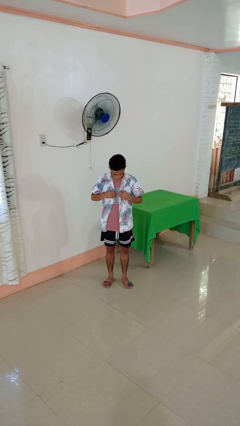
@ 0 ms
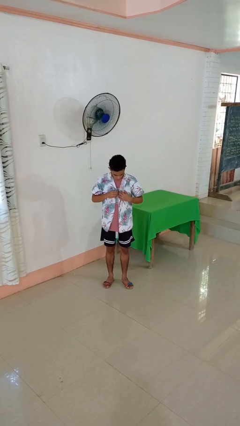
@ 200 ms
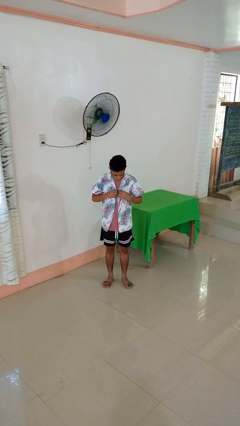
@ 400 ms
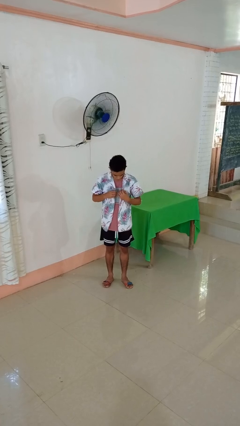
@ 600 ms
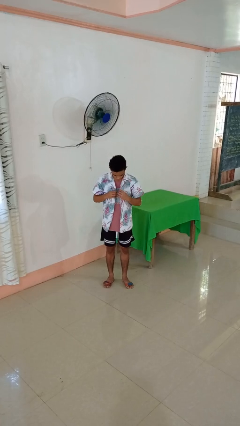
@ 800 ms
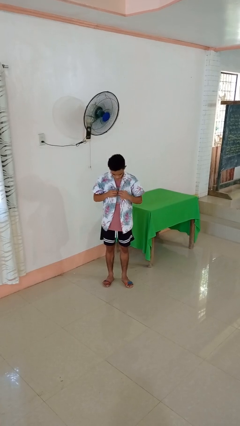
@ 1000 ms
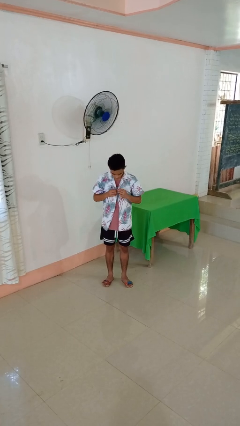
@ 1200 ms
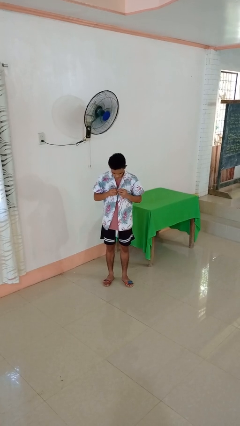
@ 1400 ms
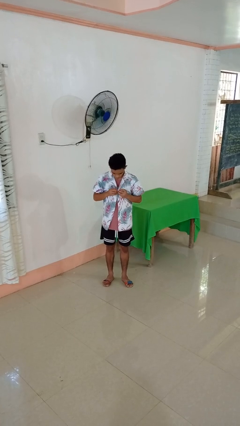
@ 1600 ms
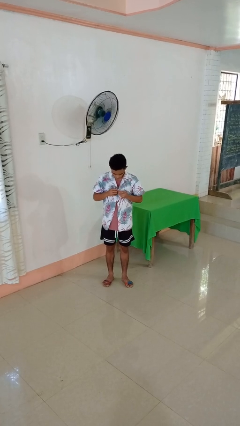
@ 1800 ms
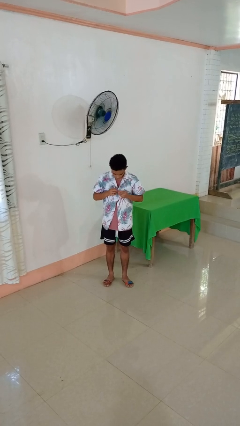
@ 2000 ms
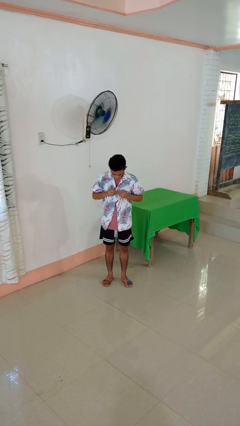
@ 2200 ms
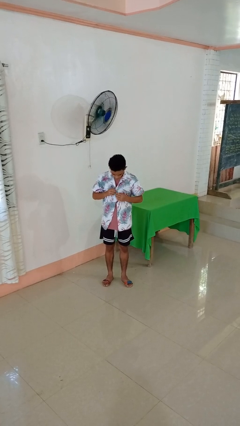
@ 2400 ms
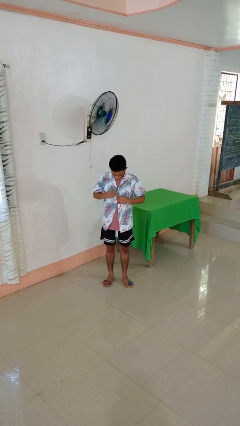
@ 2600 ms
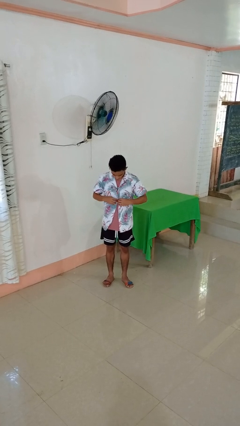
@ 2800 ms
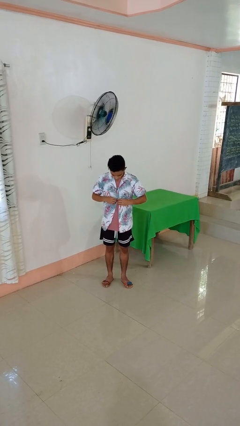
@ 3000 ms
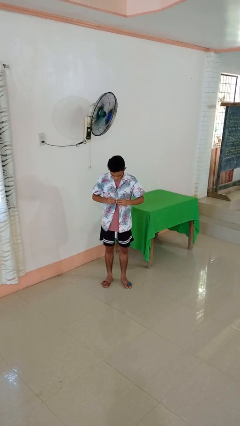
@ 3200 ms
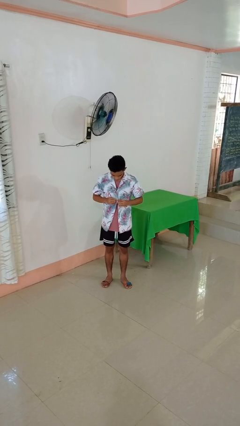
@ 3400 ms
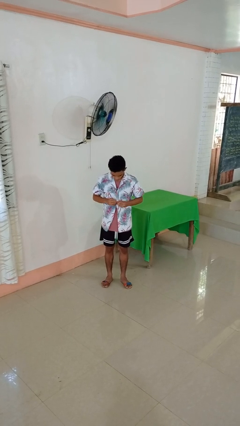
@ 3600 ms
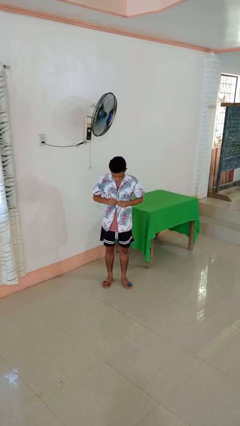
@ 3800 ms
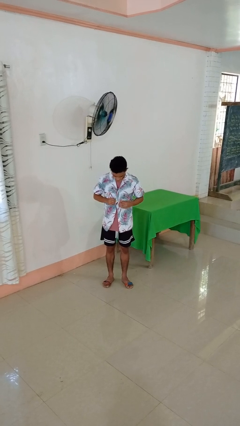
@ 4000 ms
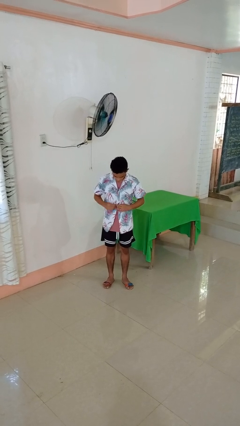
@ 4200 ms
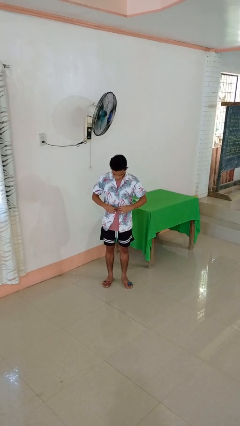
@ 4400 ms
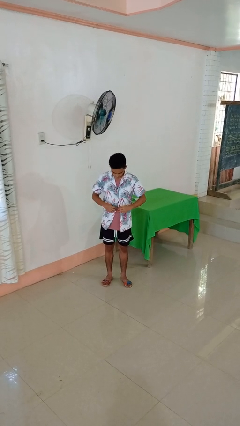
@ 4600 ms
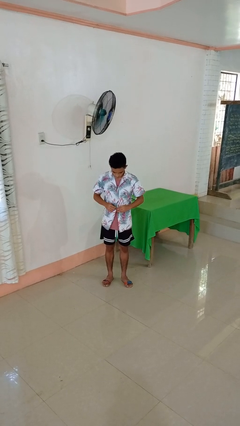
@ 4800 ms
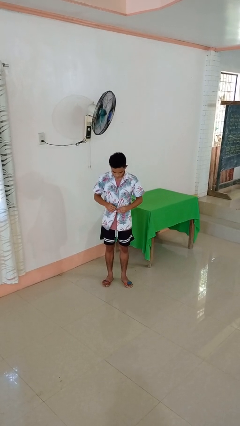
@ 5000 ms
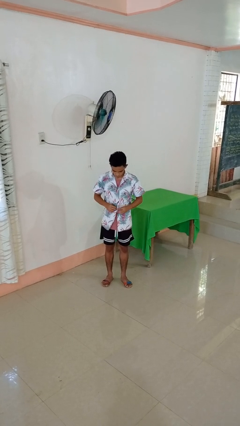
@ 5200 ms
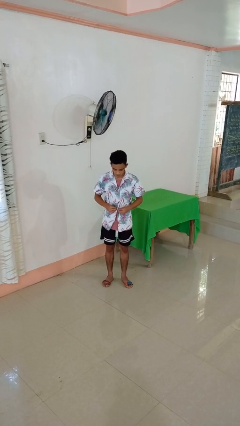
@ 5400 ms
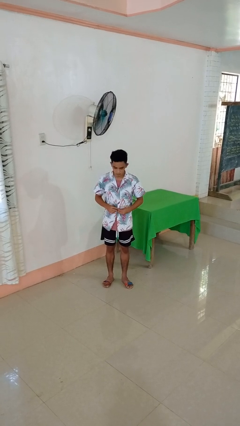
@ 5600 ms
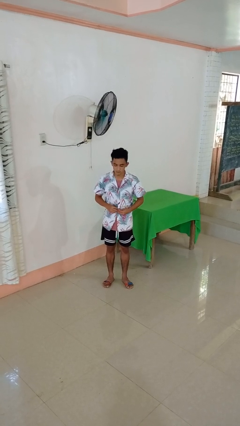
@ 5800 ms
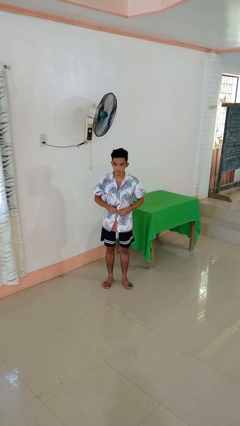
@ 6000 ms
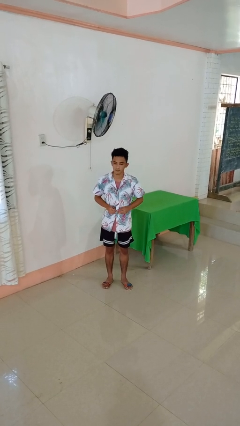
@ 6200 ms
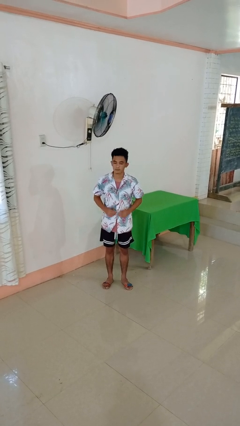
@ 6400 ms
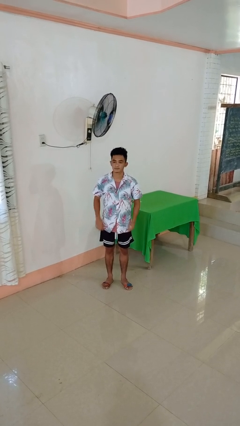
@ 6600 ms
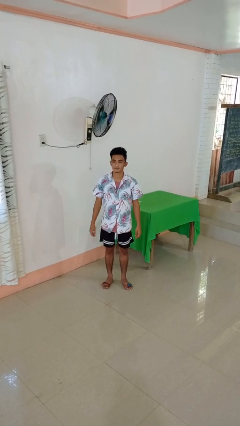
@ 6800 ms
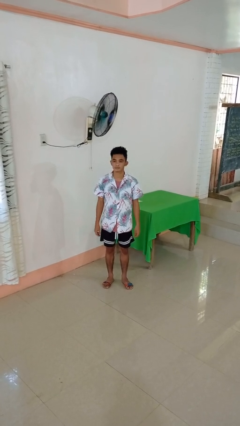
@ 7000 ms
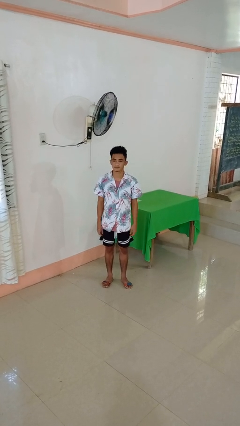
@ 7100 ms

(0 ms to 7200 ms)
person buttons shirt

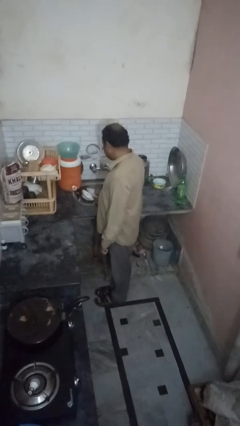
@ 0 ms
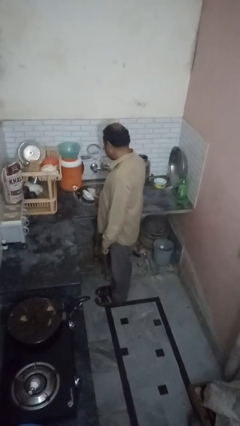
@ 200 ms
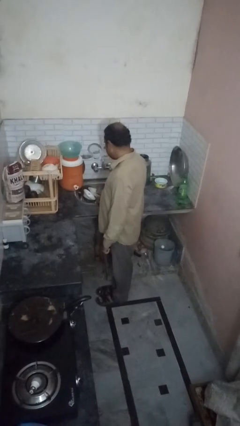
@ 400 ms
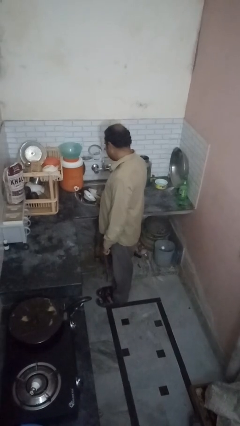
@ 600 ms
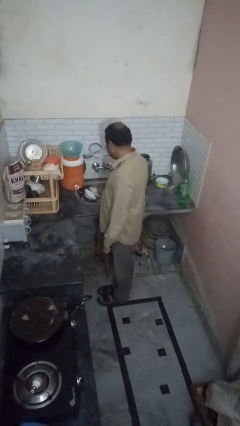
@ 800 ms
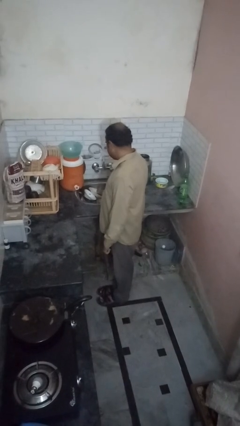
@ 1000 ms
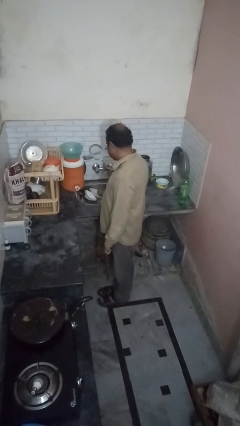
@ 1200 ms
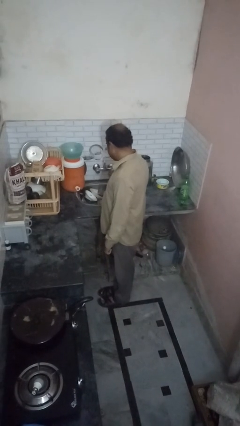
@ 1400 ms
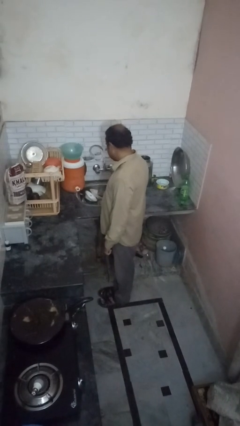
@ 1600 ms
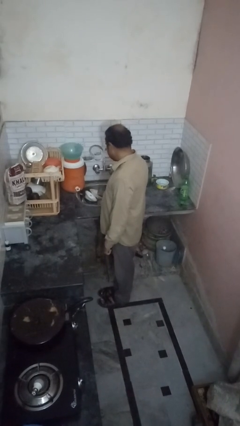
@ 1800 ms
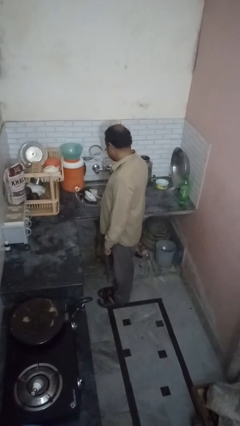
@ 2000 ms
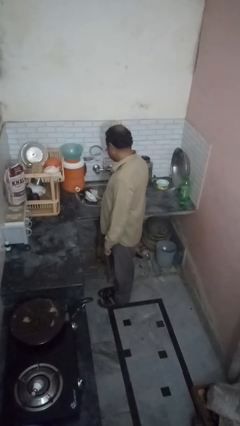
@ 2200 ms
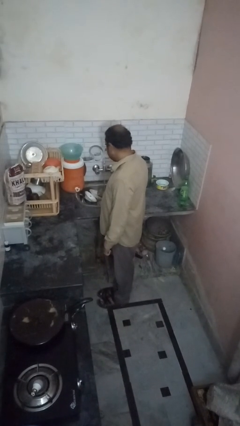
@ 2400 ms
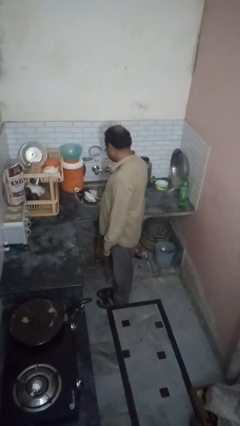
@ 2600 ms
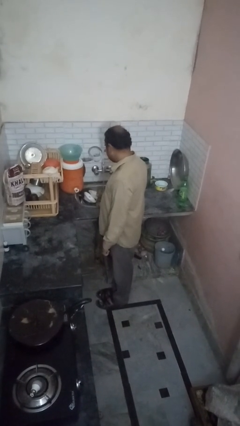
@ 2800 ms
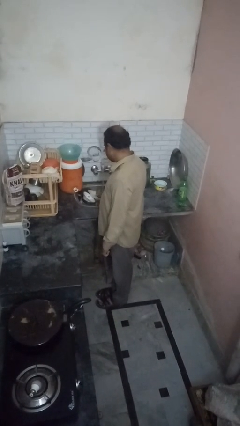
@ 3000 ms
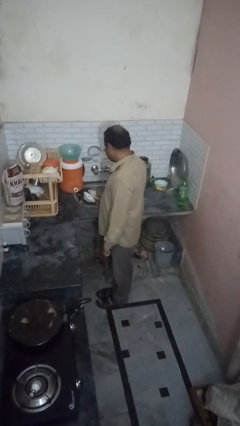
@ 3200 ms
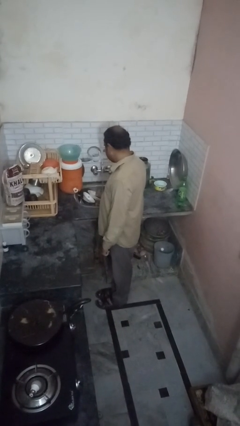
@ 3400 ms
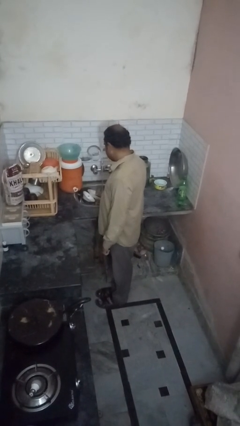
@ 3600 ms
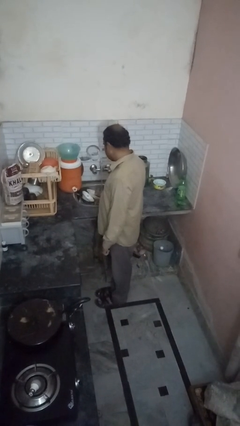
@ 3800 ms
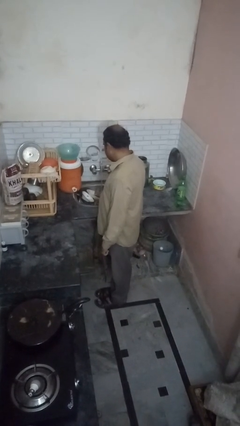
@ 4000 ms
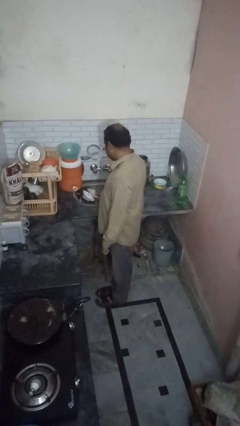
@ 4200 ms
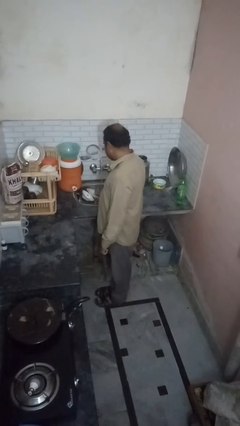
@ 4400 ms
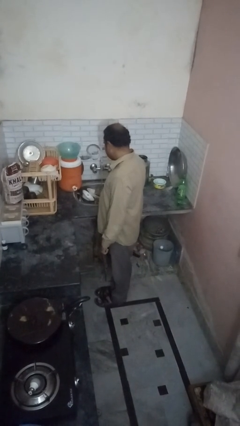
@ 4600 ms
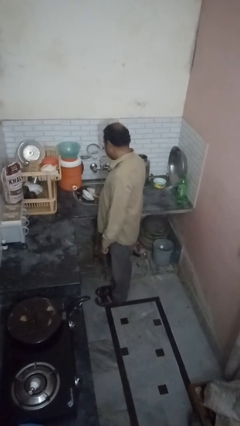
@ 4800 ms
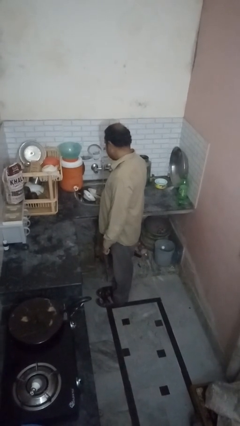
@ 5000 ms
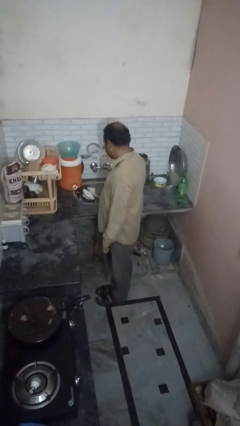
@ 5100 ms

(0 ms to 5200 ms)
person opens dishwasher

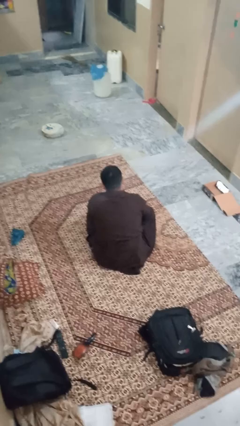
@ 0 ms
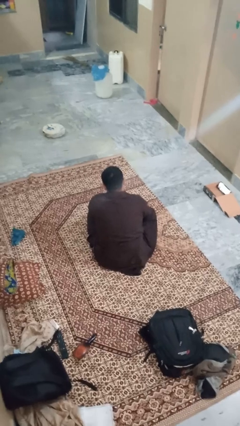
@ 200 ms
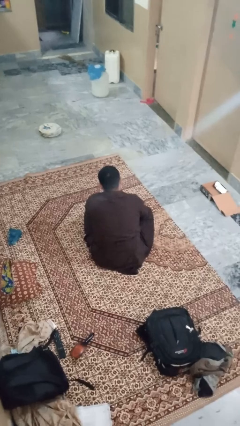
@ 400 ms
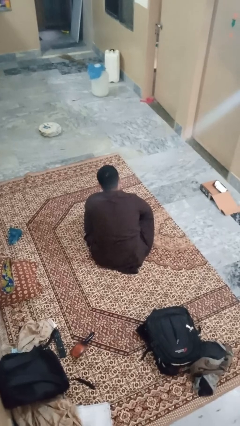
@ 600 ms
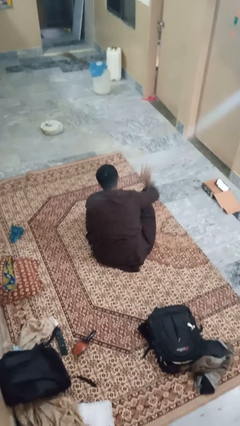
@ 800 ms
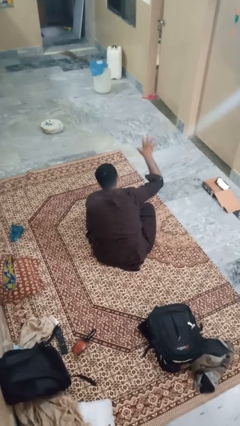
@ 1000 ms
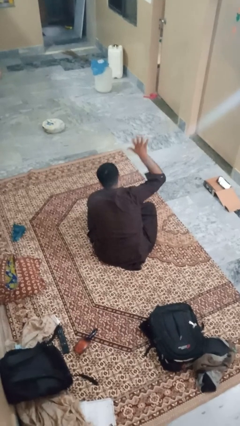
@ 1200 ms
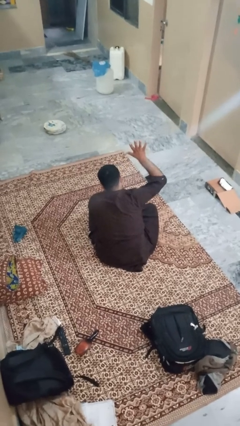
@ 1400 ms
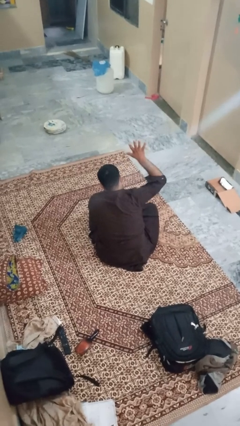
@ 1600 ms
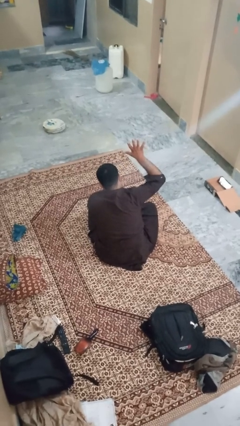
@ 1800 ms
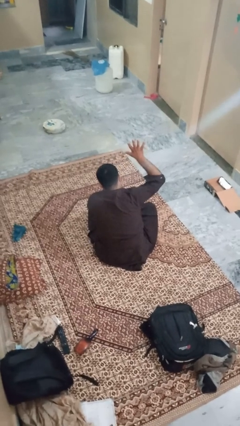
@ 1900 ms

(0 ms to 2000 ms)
person gestures number five

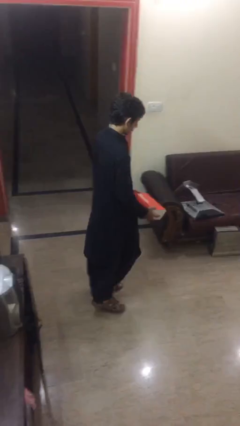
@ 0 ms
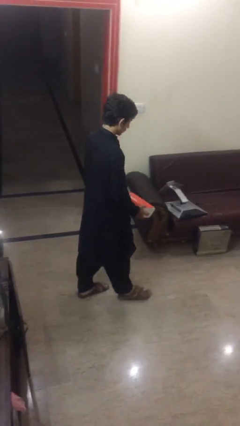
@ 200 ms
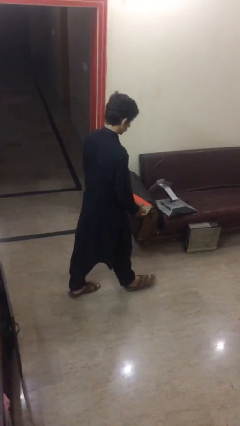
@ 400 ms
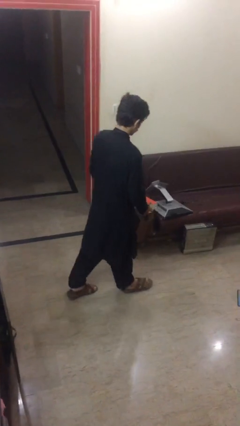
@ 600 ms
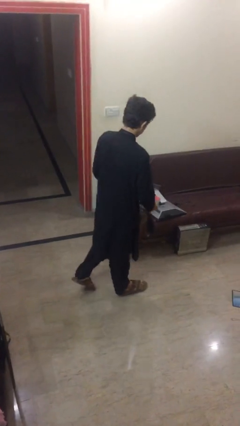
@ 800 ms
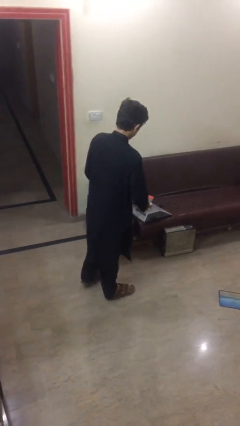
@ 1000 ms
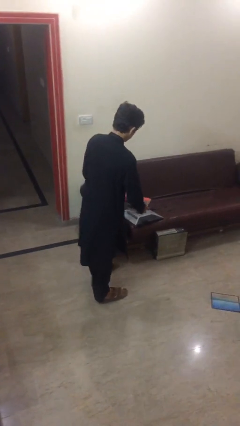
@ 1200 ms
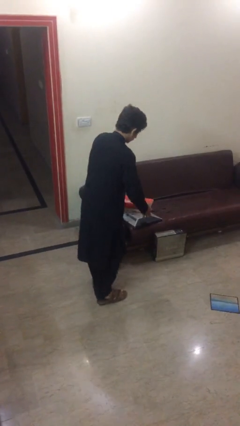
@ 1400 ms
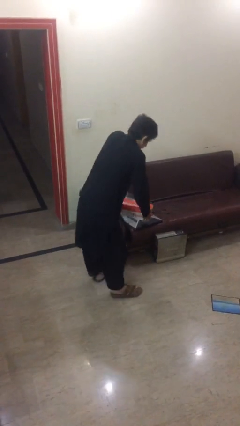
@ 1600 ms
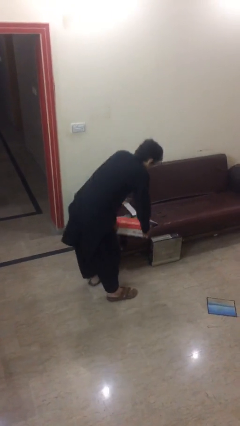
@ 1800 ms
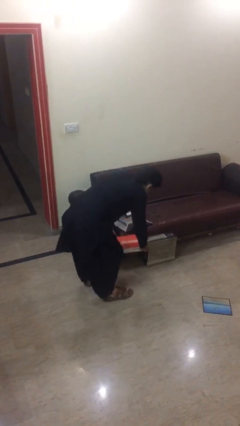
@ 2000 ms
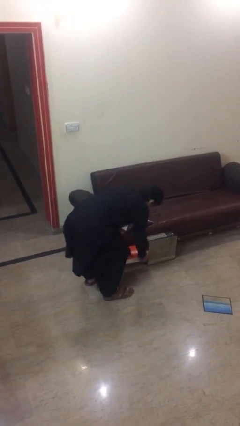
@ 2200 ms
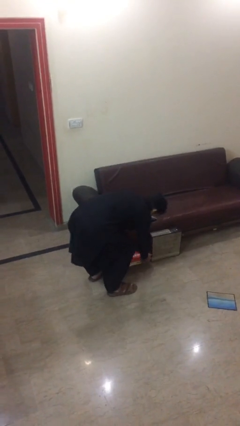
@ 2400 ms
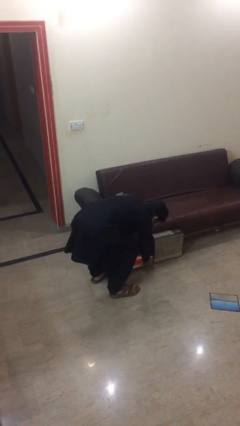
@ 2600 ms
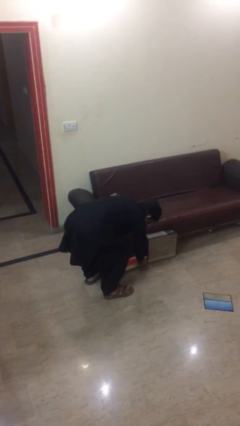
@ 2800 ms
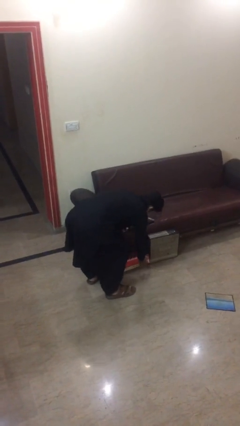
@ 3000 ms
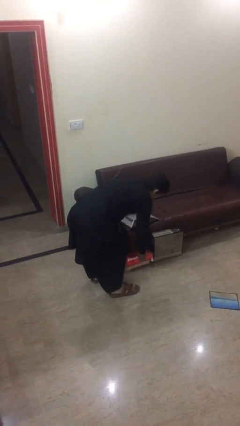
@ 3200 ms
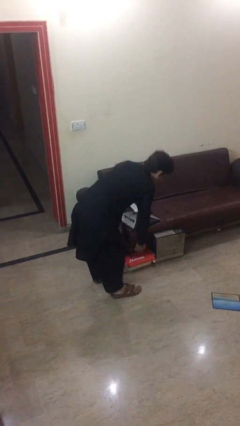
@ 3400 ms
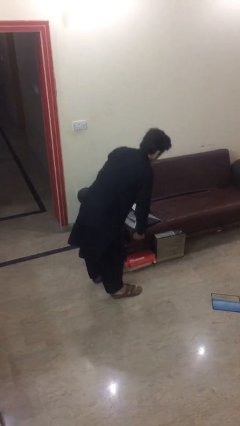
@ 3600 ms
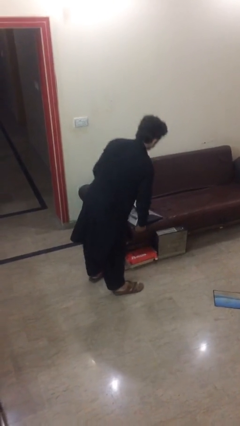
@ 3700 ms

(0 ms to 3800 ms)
person puts down object on floor
